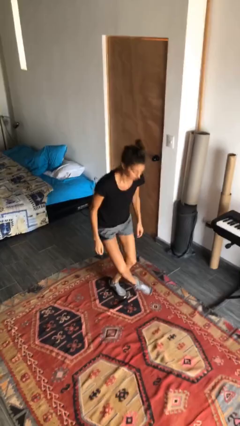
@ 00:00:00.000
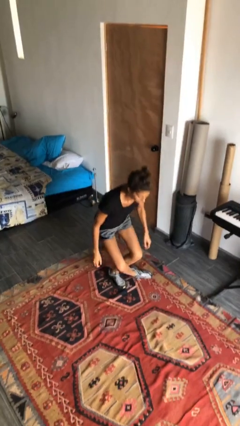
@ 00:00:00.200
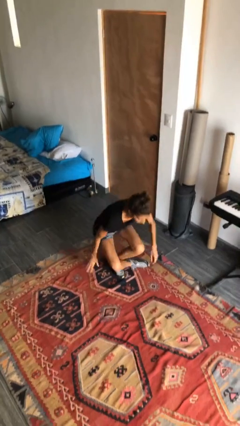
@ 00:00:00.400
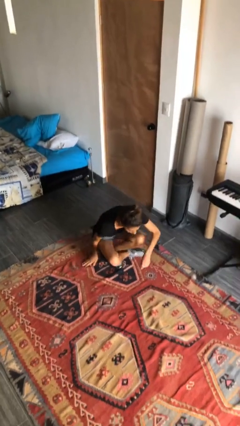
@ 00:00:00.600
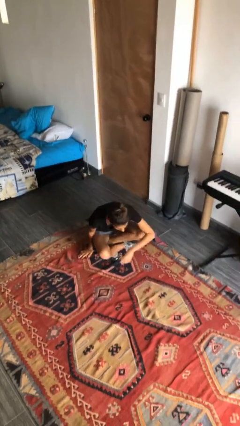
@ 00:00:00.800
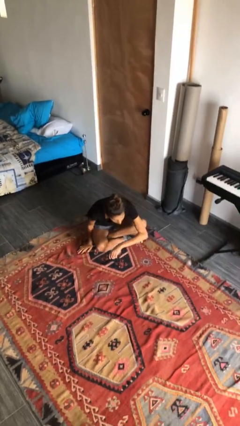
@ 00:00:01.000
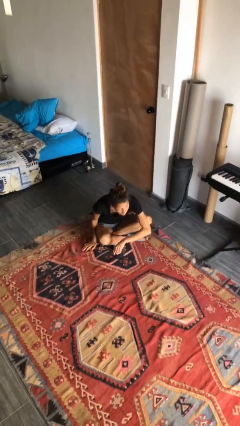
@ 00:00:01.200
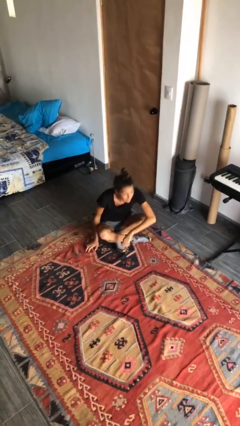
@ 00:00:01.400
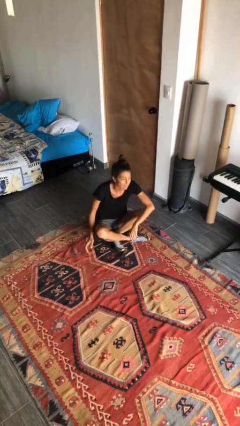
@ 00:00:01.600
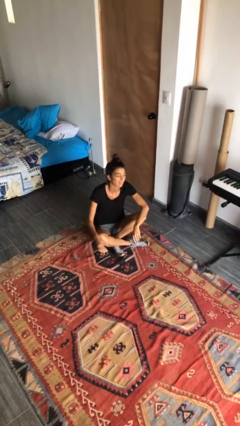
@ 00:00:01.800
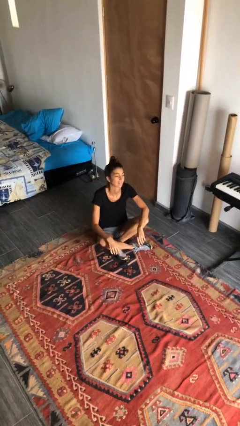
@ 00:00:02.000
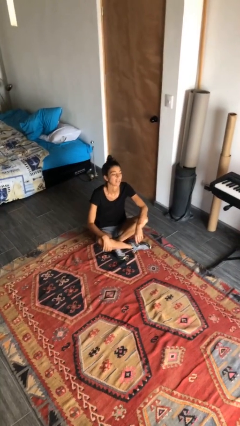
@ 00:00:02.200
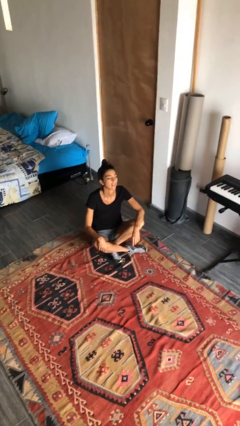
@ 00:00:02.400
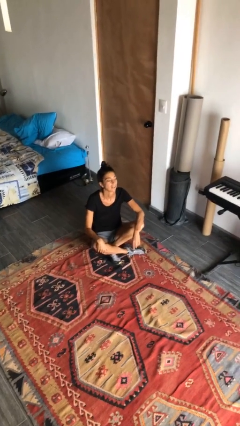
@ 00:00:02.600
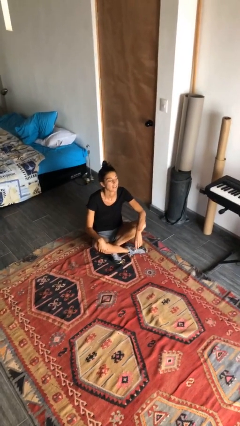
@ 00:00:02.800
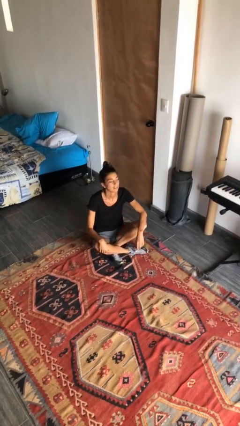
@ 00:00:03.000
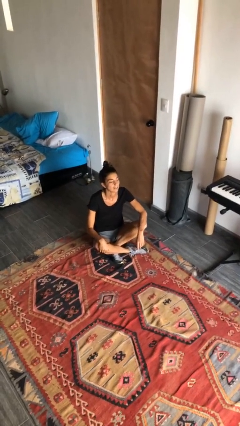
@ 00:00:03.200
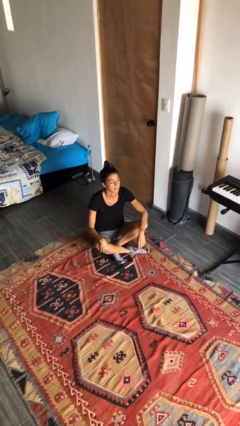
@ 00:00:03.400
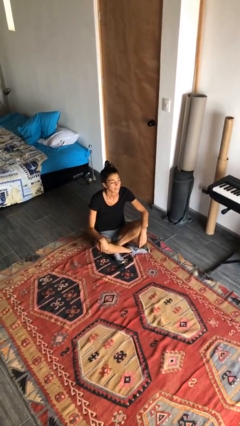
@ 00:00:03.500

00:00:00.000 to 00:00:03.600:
person sits crisscross

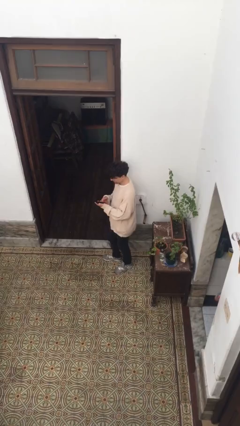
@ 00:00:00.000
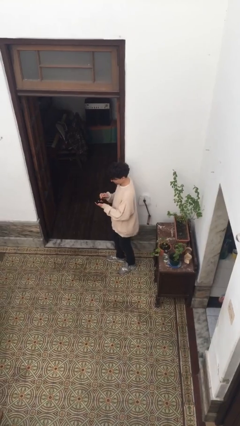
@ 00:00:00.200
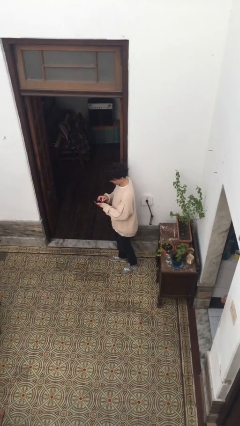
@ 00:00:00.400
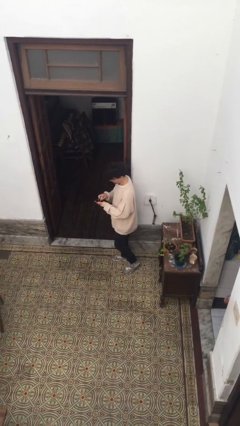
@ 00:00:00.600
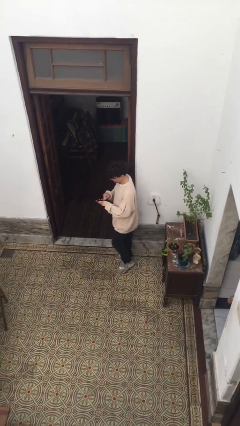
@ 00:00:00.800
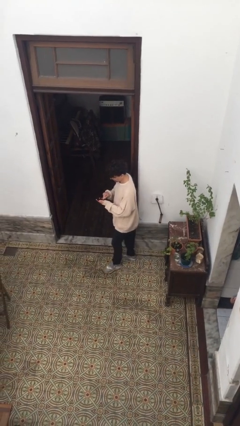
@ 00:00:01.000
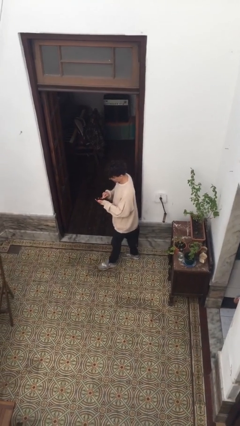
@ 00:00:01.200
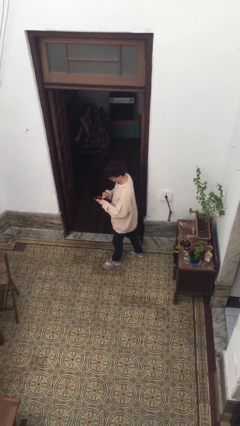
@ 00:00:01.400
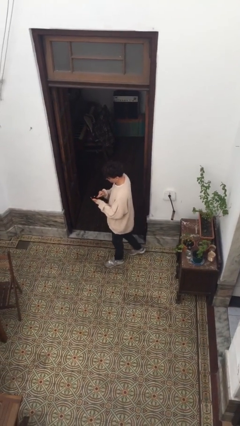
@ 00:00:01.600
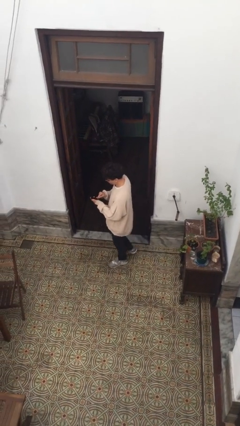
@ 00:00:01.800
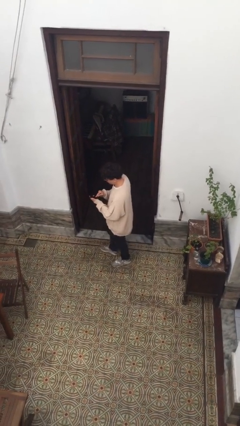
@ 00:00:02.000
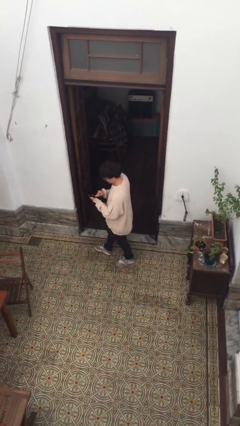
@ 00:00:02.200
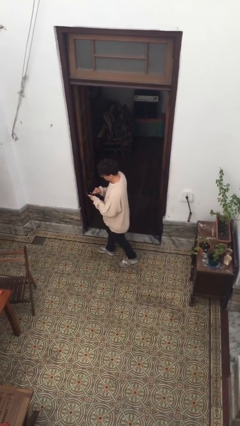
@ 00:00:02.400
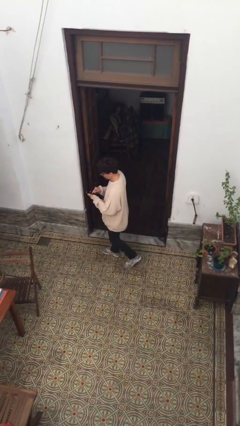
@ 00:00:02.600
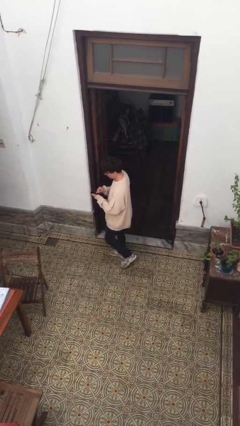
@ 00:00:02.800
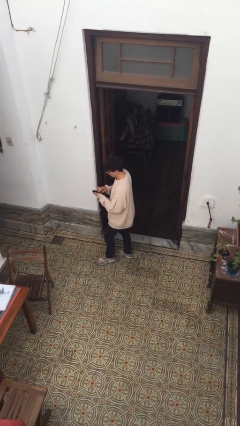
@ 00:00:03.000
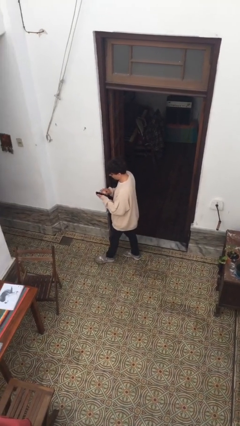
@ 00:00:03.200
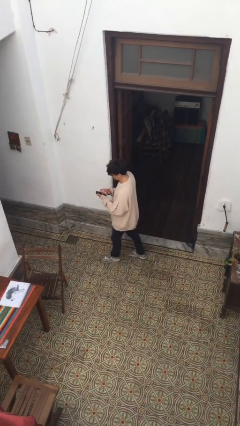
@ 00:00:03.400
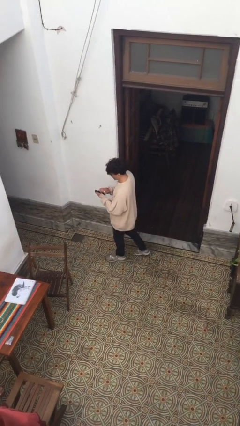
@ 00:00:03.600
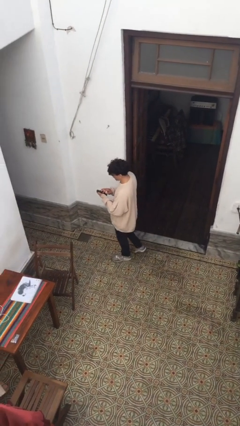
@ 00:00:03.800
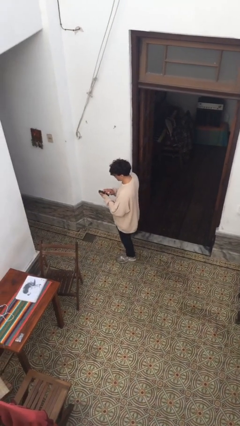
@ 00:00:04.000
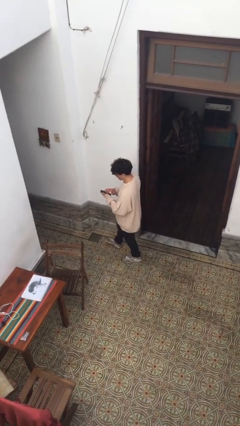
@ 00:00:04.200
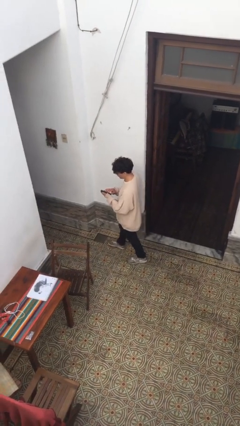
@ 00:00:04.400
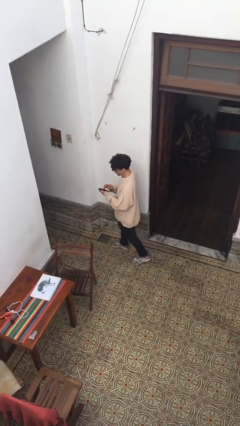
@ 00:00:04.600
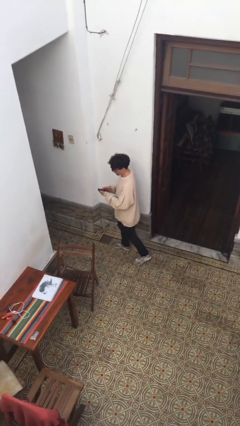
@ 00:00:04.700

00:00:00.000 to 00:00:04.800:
person texts on phone

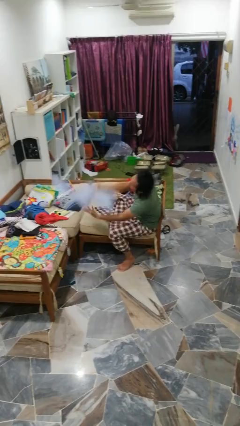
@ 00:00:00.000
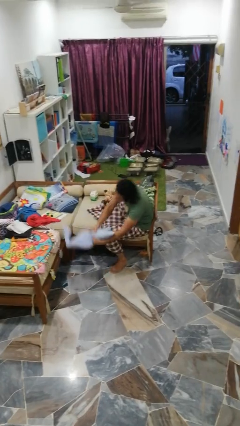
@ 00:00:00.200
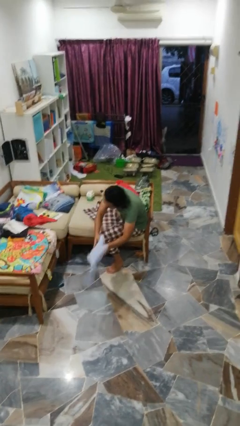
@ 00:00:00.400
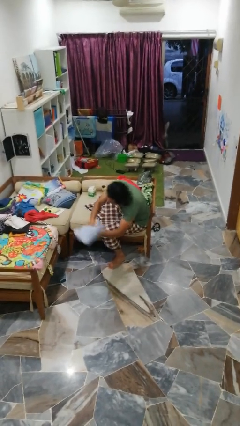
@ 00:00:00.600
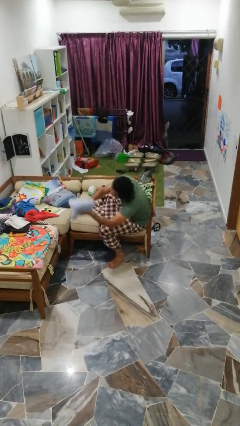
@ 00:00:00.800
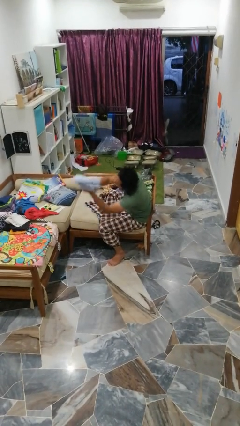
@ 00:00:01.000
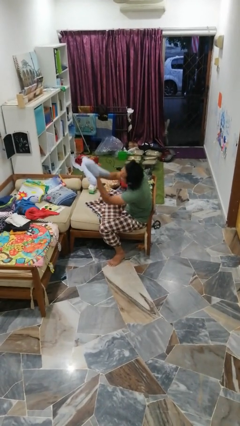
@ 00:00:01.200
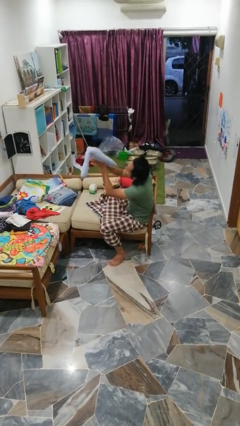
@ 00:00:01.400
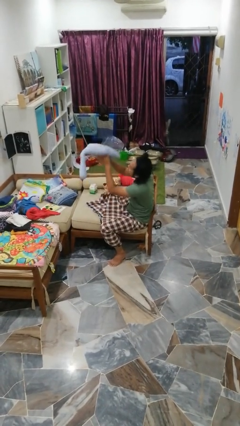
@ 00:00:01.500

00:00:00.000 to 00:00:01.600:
person catches dropped object

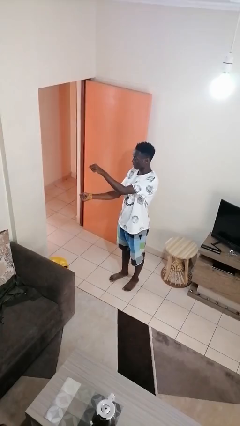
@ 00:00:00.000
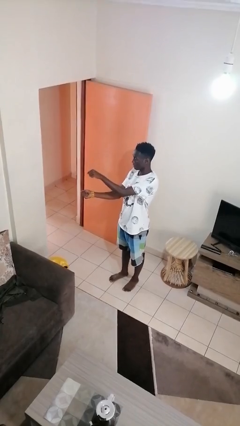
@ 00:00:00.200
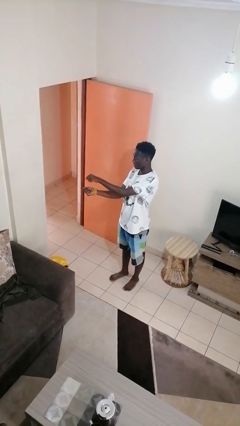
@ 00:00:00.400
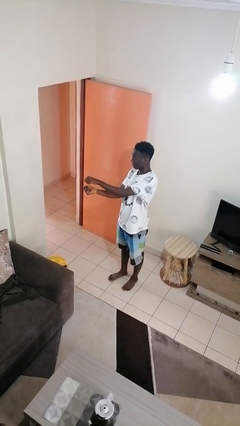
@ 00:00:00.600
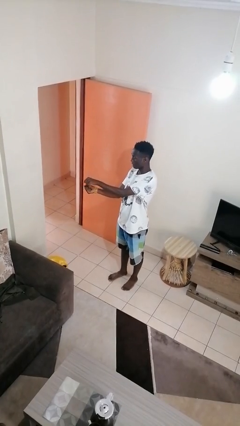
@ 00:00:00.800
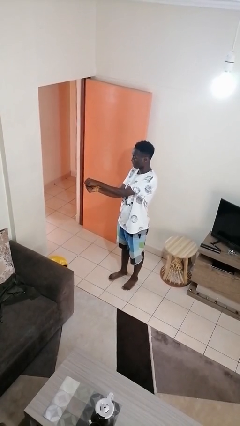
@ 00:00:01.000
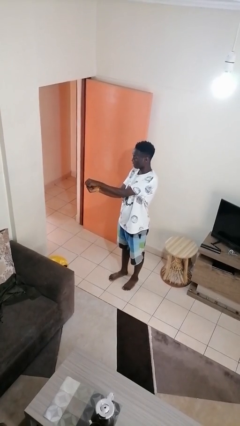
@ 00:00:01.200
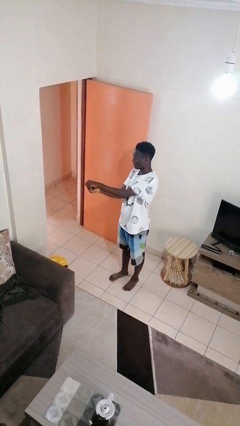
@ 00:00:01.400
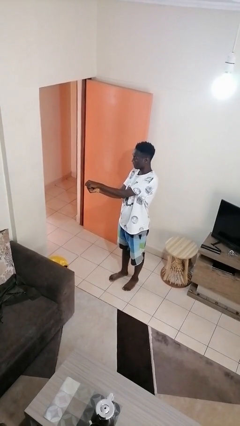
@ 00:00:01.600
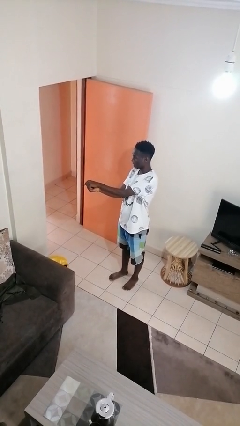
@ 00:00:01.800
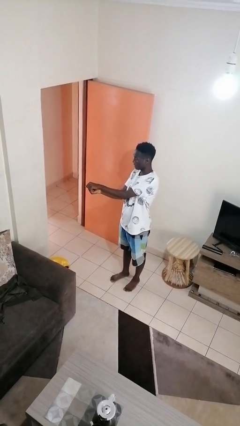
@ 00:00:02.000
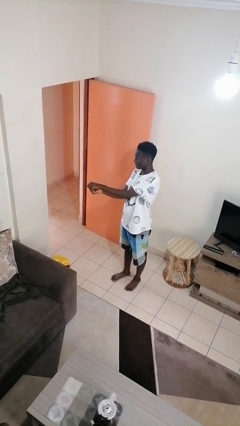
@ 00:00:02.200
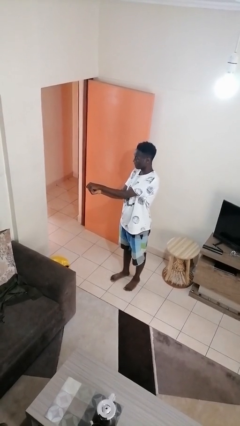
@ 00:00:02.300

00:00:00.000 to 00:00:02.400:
person gestures zoom out

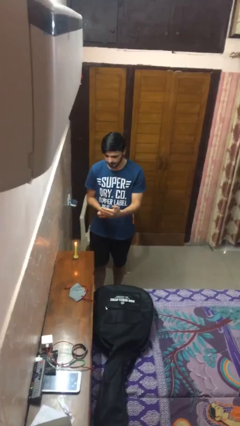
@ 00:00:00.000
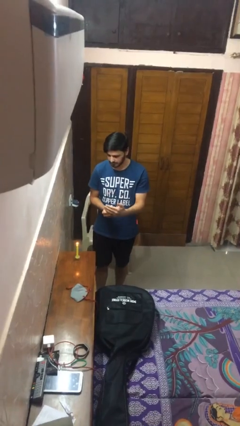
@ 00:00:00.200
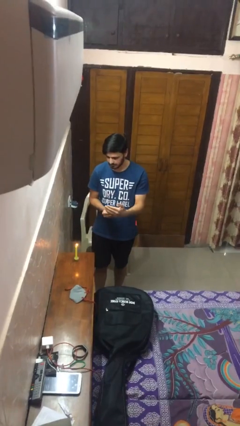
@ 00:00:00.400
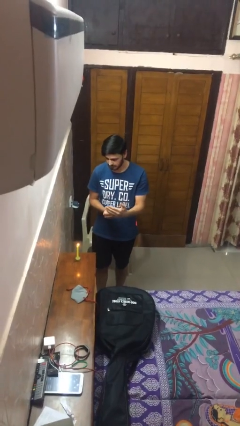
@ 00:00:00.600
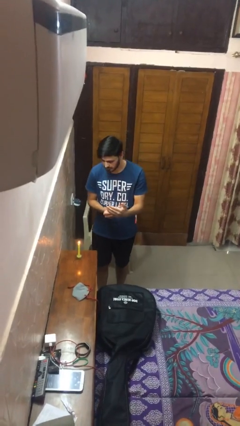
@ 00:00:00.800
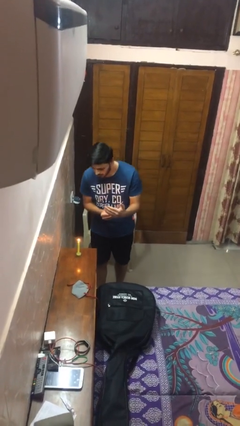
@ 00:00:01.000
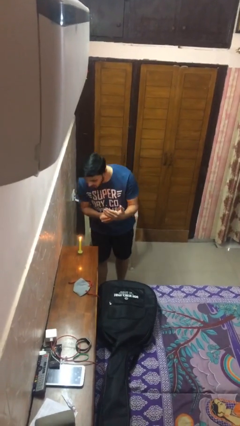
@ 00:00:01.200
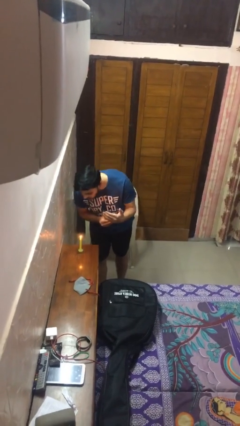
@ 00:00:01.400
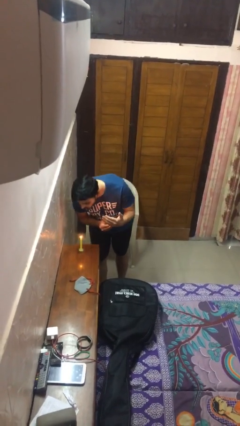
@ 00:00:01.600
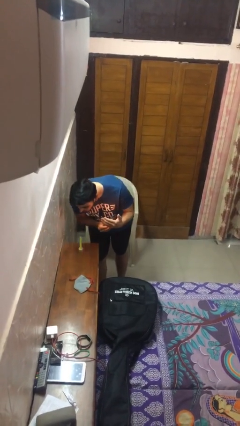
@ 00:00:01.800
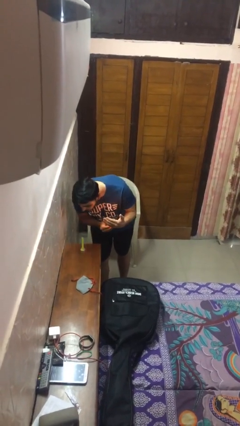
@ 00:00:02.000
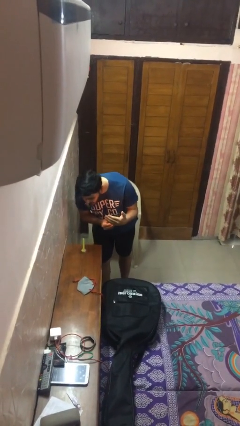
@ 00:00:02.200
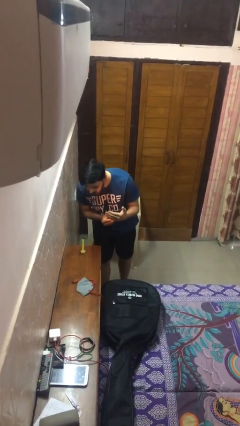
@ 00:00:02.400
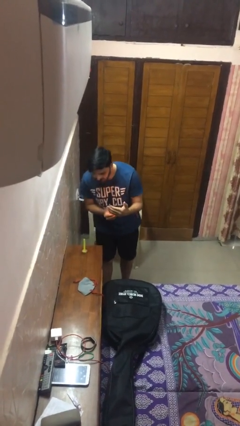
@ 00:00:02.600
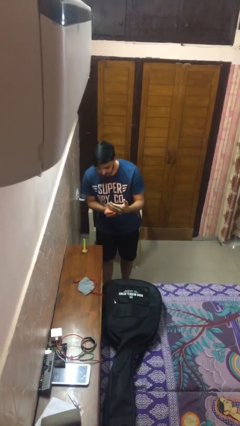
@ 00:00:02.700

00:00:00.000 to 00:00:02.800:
person extinguishes candle

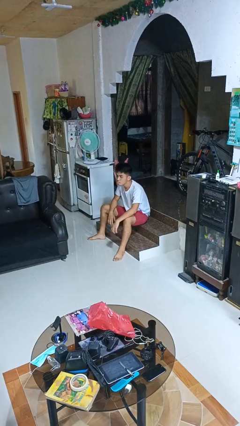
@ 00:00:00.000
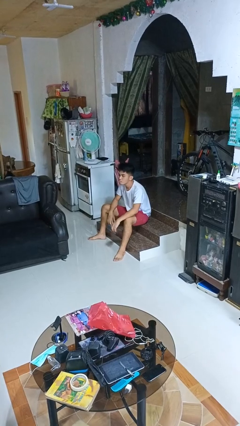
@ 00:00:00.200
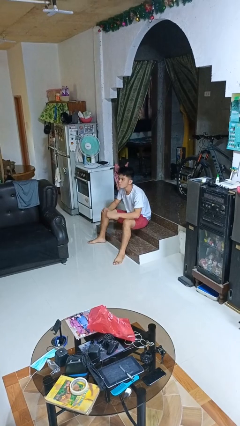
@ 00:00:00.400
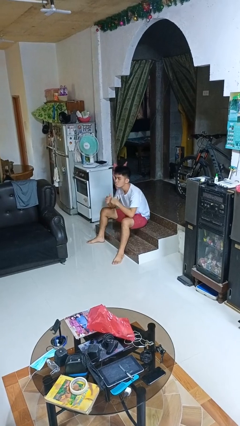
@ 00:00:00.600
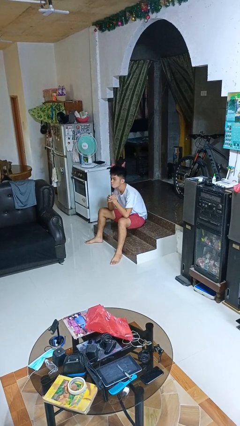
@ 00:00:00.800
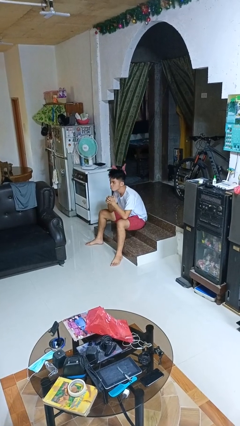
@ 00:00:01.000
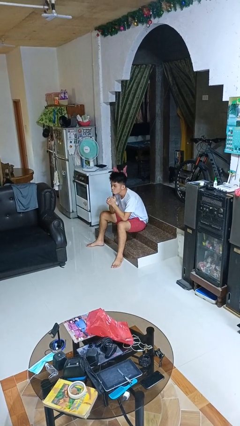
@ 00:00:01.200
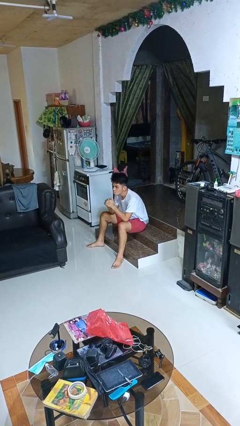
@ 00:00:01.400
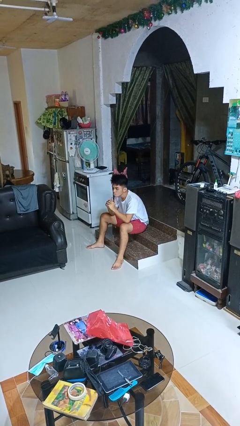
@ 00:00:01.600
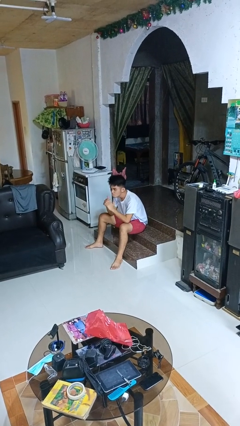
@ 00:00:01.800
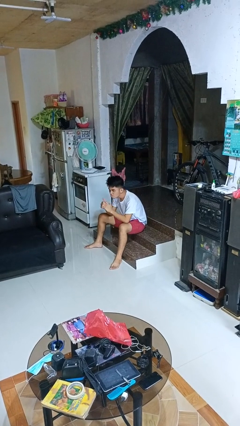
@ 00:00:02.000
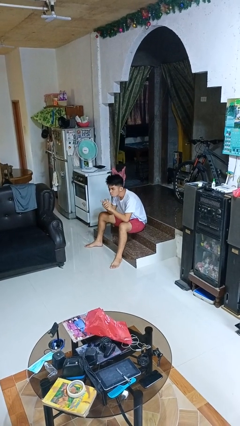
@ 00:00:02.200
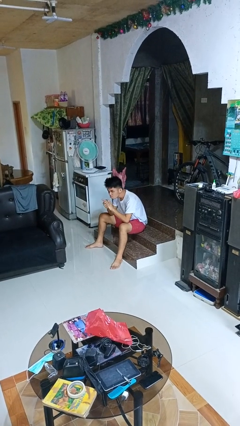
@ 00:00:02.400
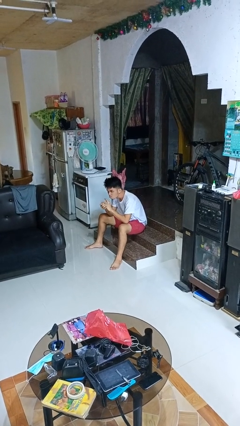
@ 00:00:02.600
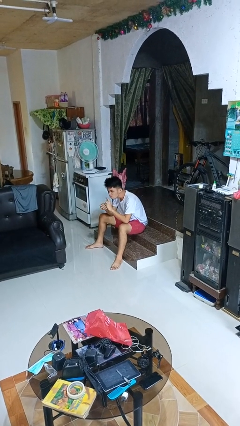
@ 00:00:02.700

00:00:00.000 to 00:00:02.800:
person cracks knuckles
